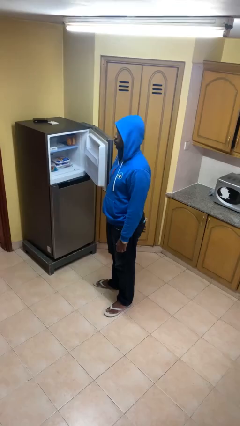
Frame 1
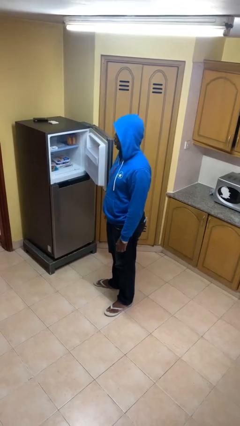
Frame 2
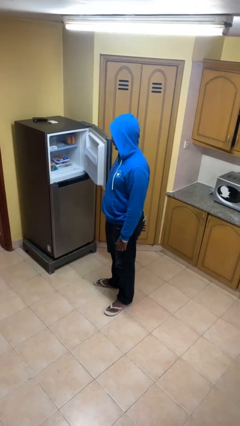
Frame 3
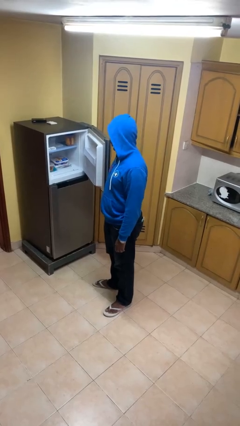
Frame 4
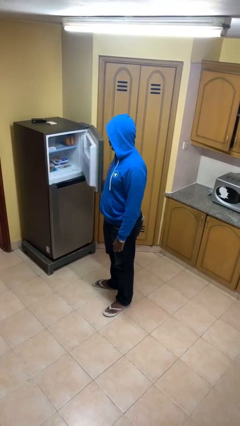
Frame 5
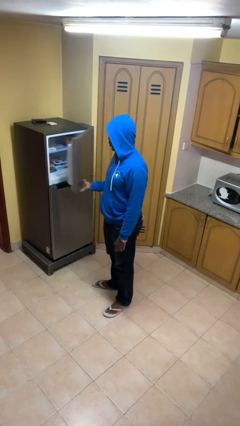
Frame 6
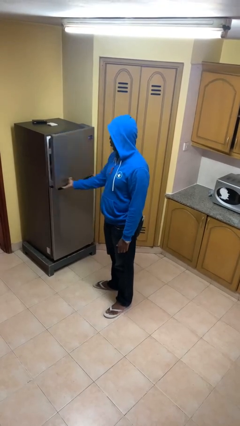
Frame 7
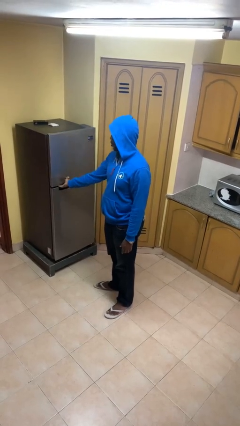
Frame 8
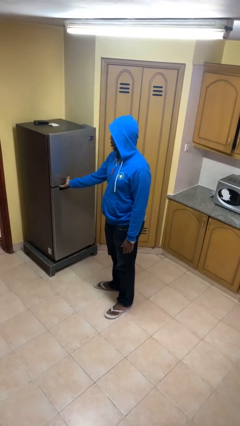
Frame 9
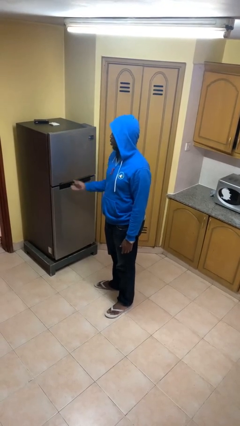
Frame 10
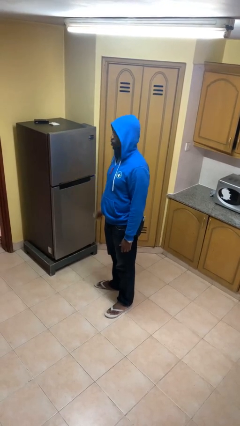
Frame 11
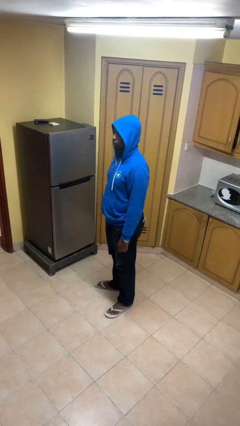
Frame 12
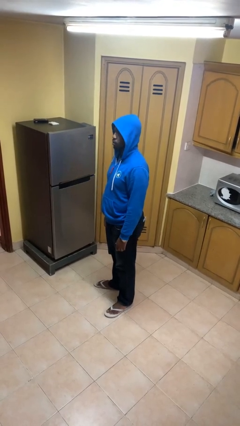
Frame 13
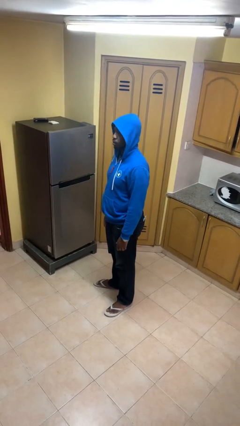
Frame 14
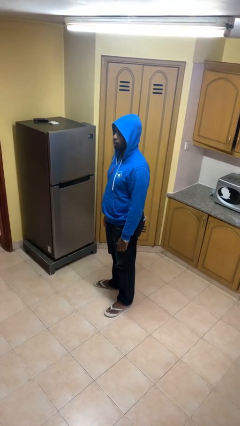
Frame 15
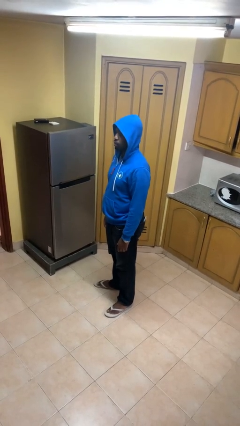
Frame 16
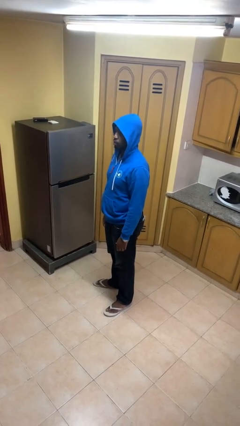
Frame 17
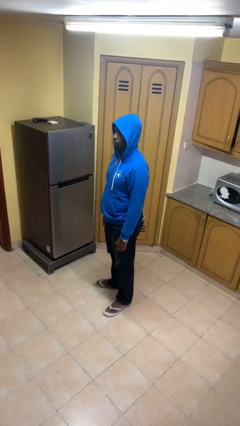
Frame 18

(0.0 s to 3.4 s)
person closes refrigerator

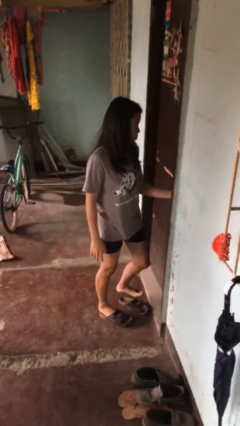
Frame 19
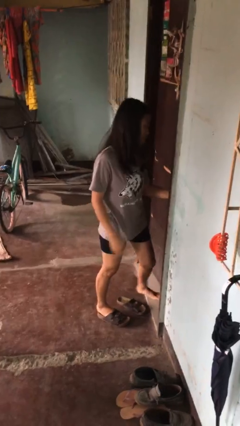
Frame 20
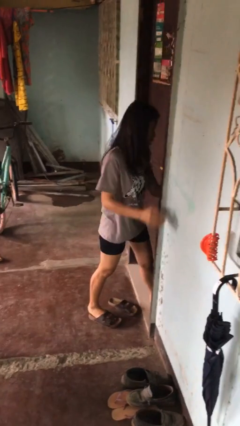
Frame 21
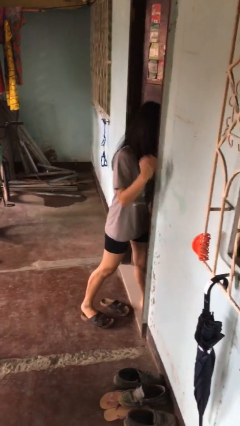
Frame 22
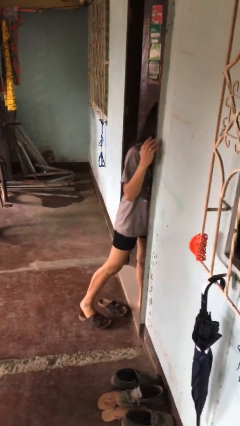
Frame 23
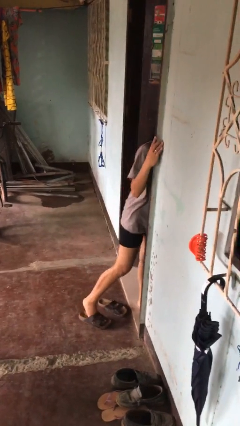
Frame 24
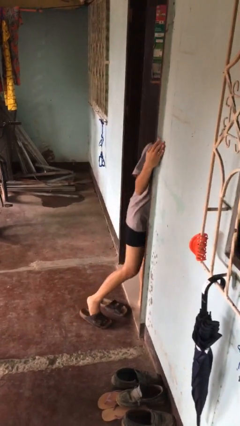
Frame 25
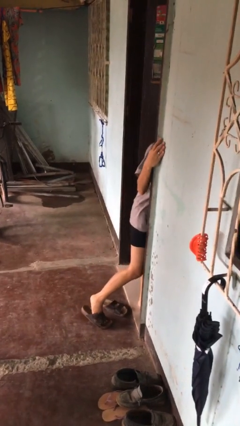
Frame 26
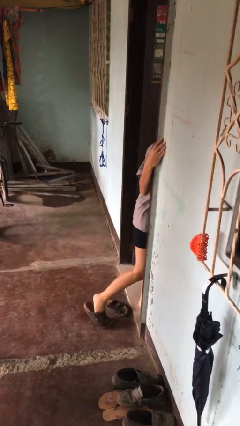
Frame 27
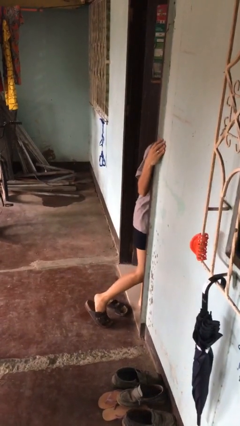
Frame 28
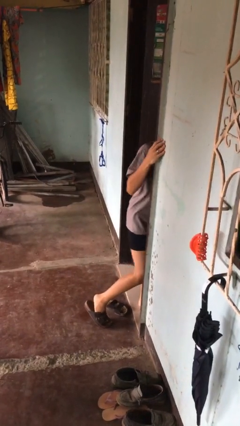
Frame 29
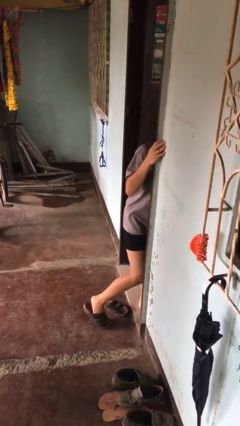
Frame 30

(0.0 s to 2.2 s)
person opens facility door

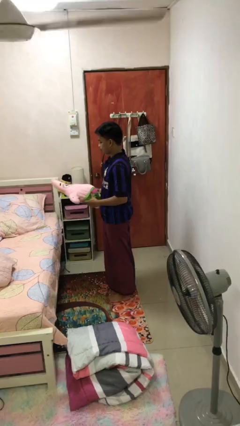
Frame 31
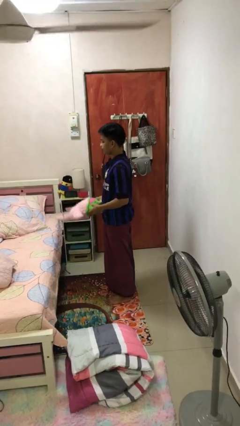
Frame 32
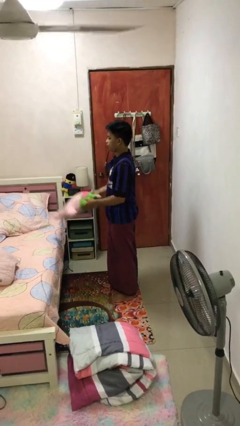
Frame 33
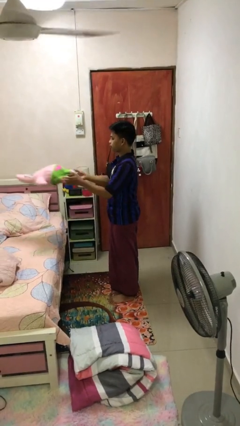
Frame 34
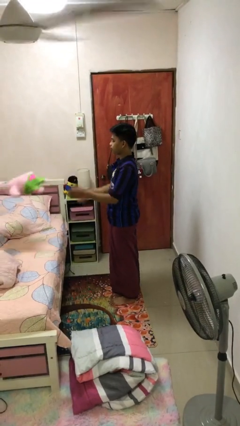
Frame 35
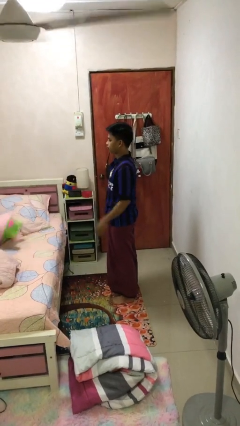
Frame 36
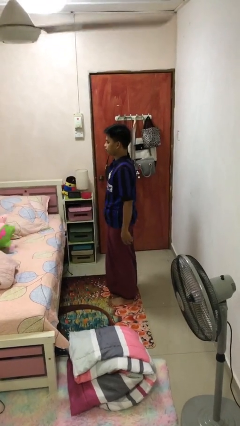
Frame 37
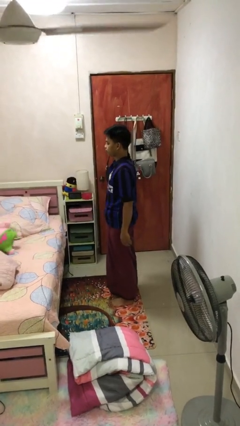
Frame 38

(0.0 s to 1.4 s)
person throws object on bed

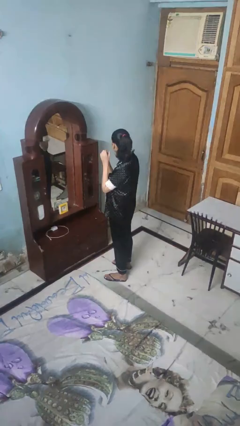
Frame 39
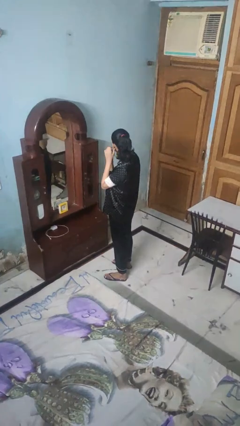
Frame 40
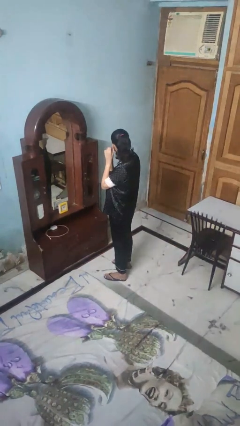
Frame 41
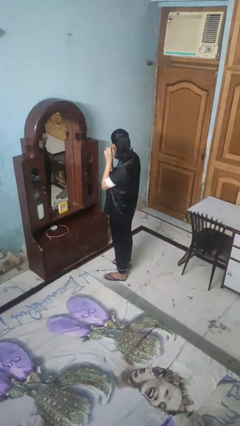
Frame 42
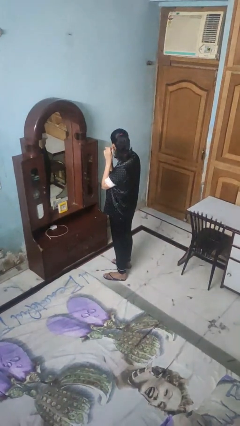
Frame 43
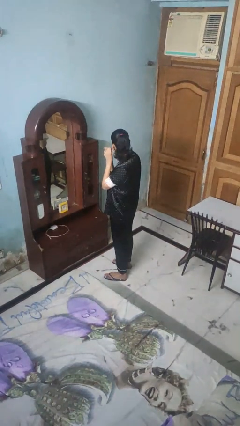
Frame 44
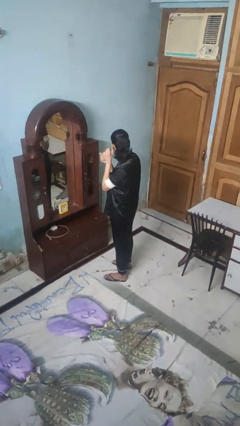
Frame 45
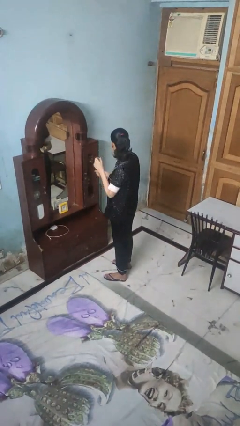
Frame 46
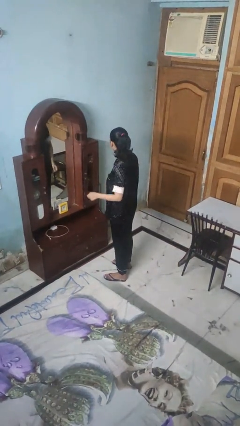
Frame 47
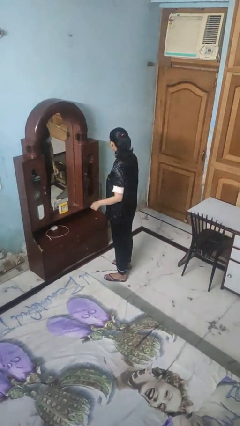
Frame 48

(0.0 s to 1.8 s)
person takes off earrings

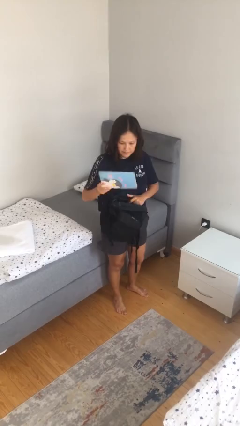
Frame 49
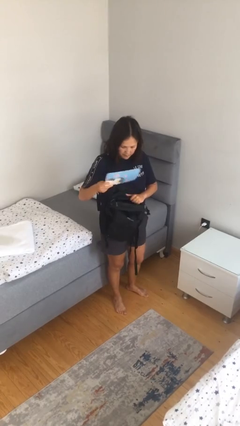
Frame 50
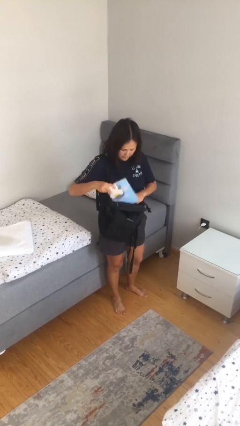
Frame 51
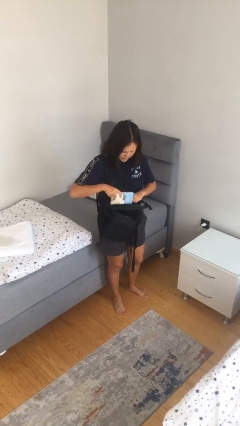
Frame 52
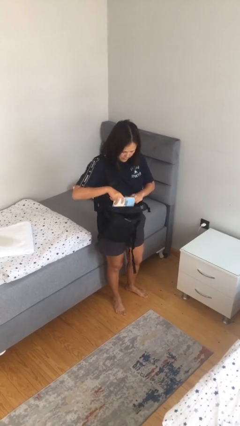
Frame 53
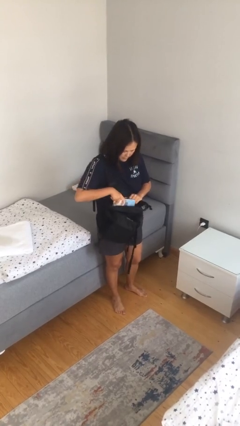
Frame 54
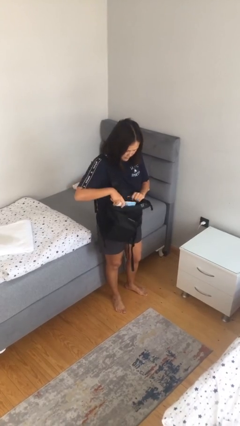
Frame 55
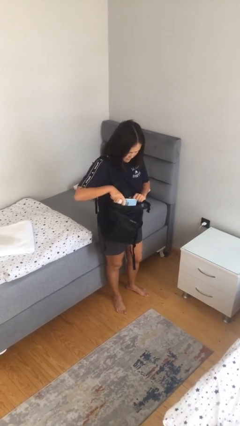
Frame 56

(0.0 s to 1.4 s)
person puts object into backpack

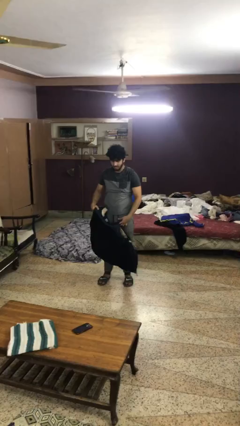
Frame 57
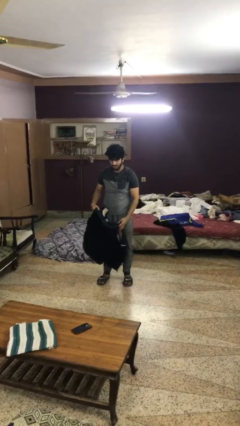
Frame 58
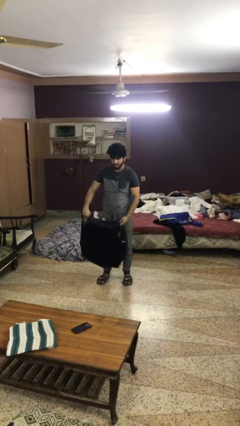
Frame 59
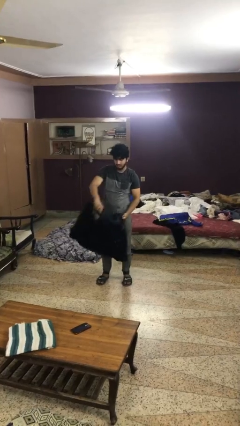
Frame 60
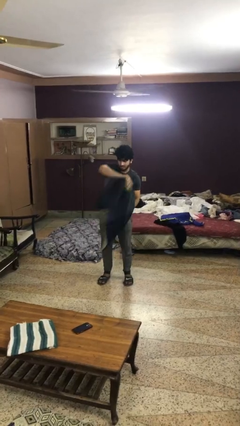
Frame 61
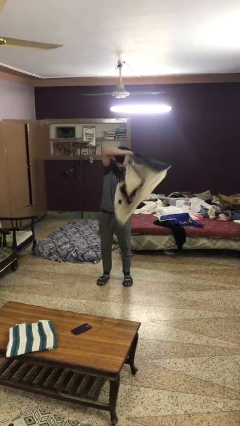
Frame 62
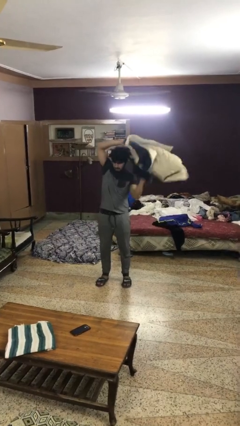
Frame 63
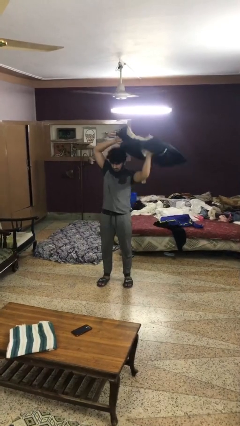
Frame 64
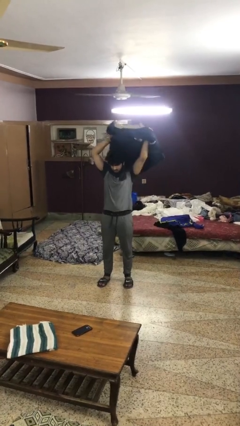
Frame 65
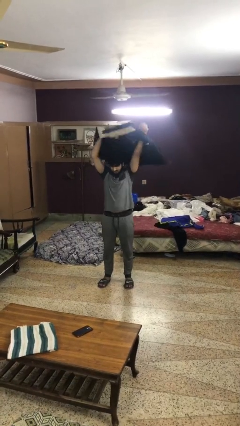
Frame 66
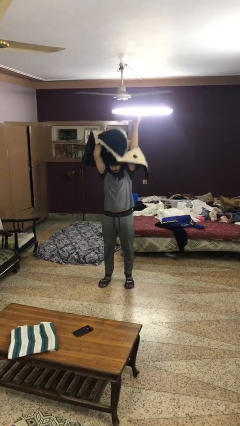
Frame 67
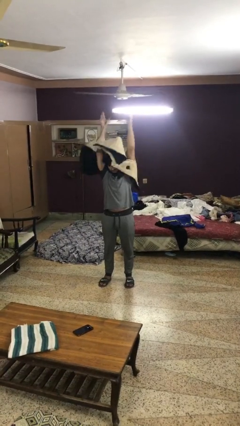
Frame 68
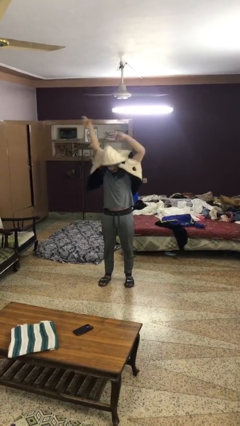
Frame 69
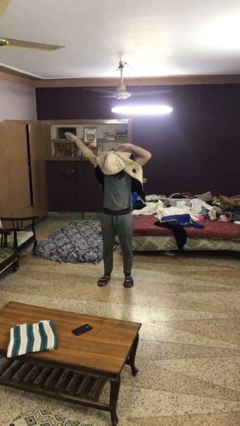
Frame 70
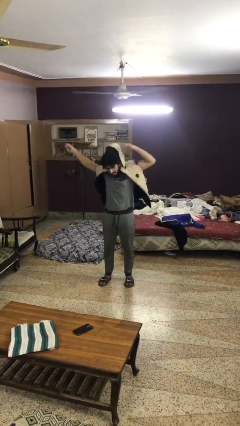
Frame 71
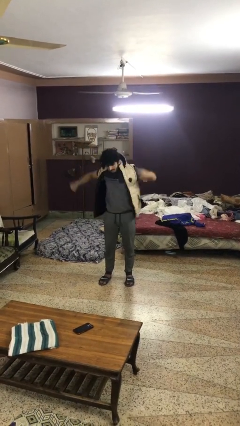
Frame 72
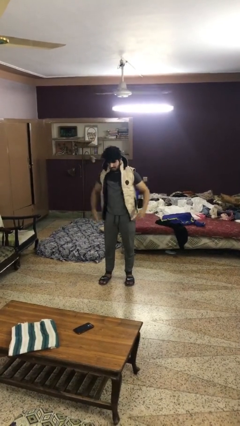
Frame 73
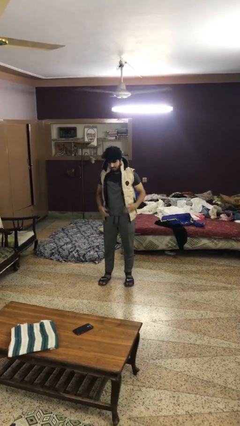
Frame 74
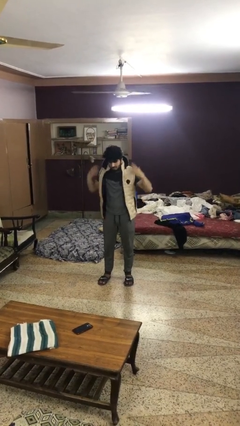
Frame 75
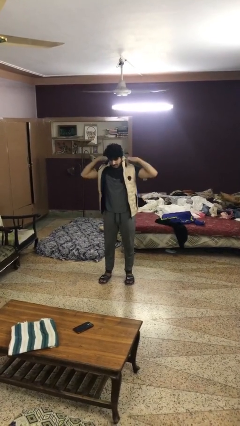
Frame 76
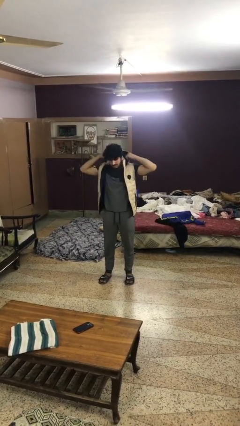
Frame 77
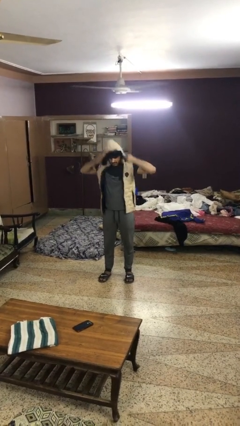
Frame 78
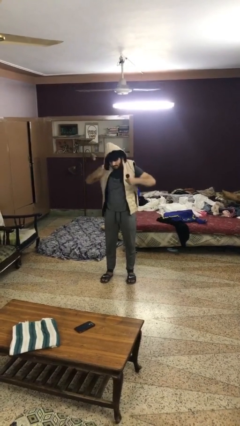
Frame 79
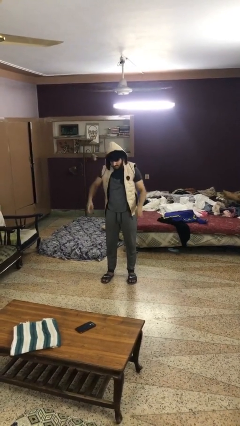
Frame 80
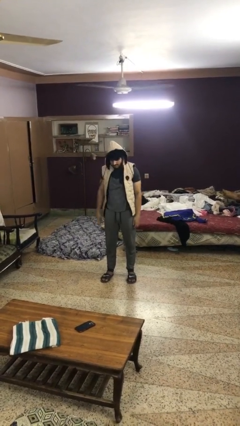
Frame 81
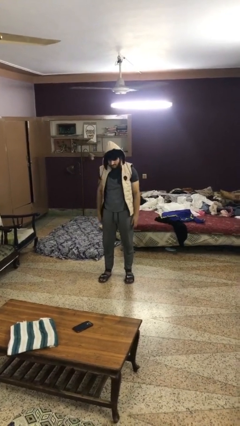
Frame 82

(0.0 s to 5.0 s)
person puts on hoodie

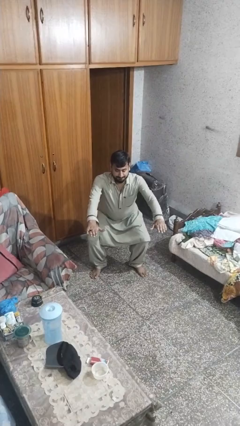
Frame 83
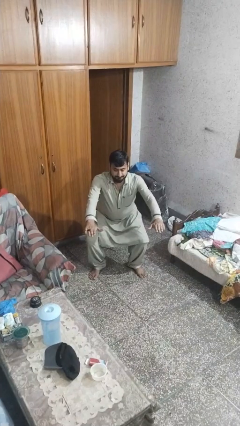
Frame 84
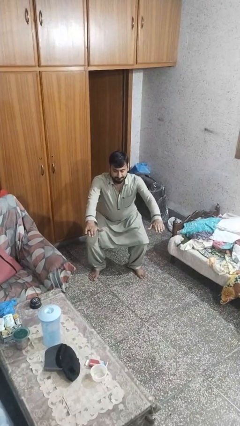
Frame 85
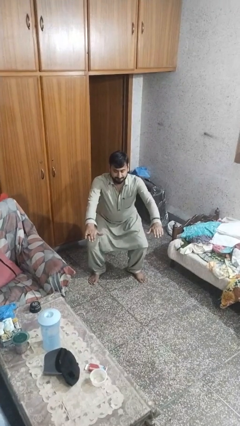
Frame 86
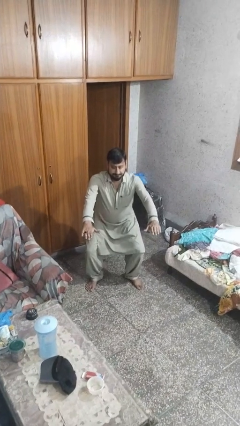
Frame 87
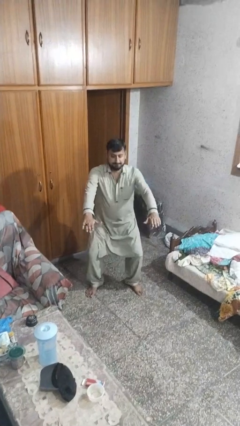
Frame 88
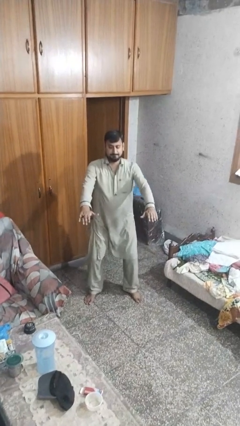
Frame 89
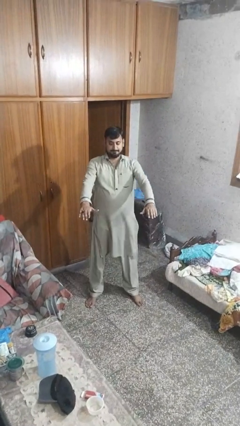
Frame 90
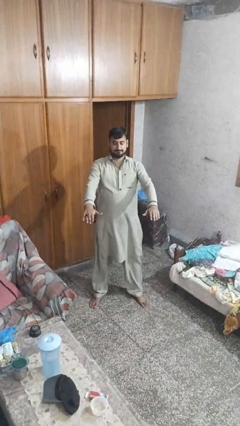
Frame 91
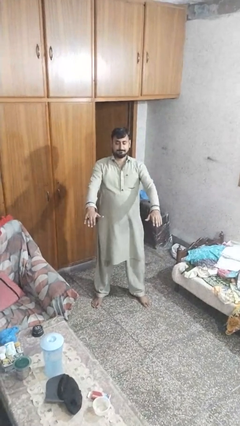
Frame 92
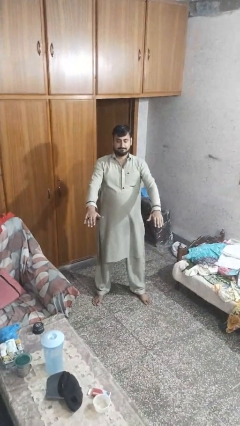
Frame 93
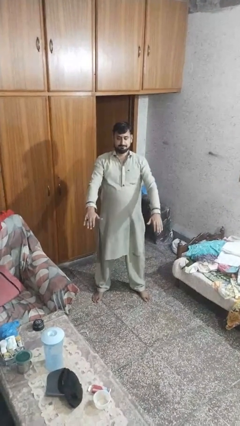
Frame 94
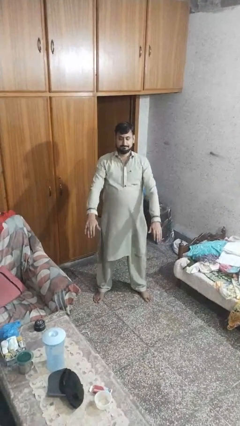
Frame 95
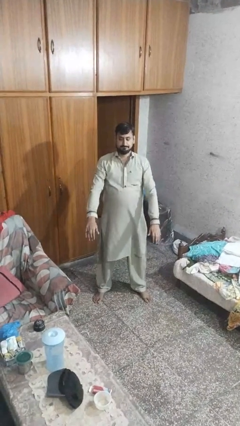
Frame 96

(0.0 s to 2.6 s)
person stands up
